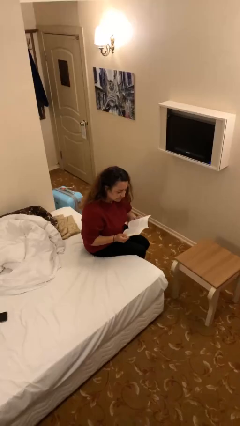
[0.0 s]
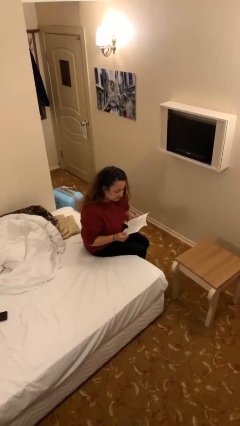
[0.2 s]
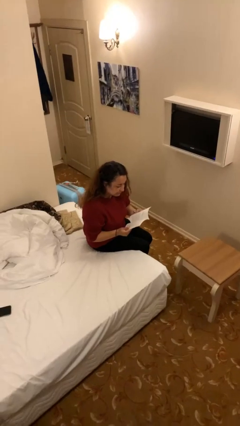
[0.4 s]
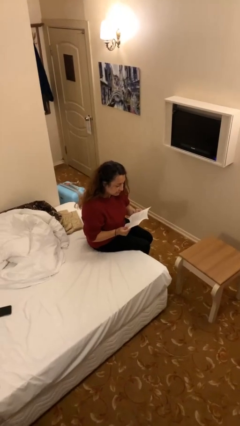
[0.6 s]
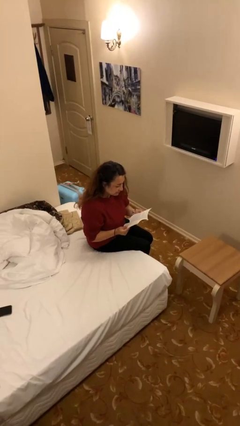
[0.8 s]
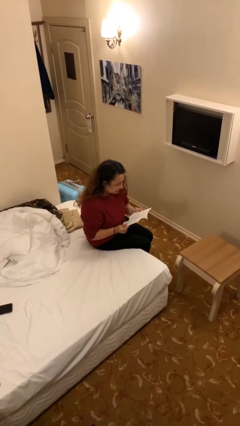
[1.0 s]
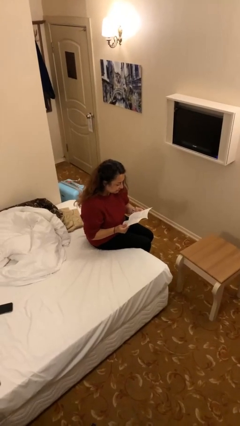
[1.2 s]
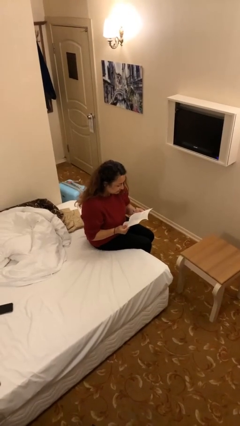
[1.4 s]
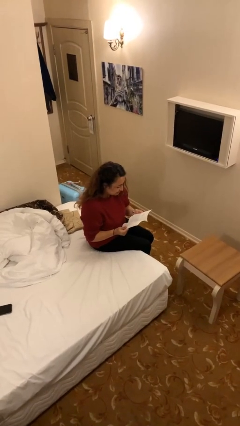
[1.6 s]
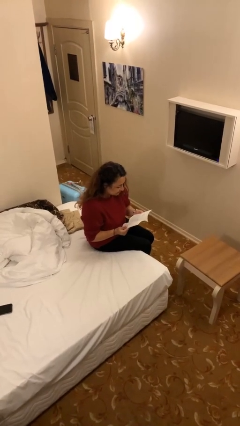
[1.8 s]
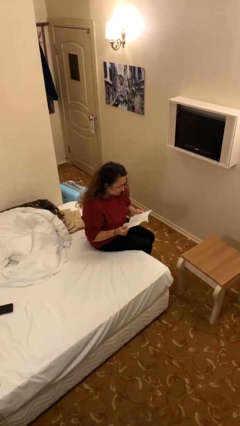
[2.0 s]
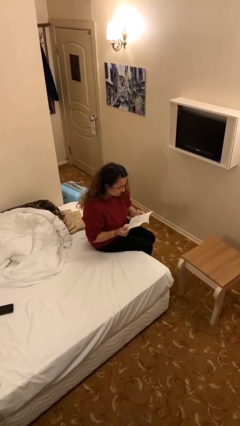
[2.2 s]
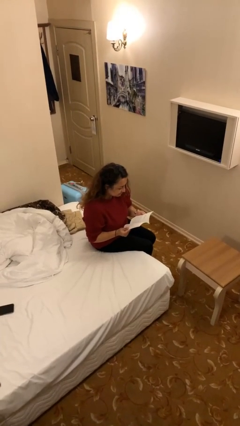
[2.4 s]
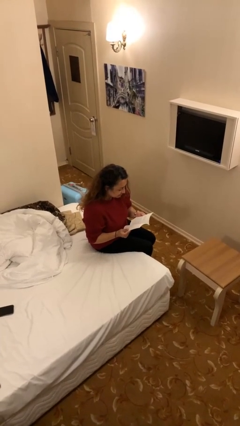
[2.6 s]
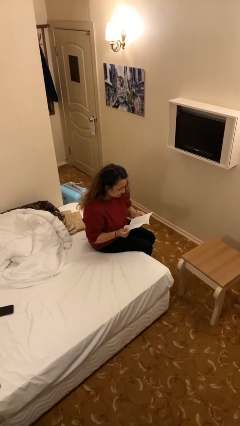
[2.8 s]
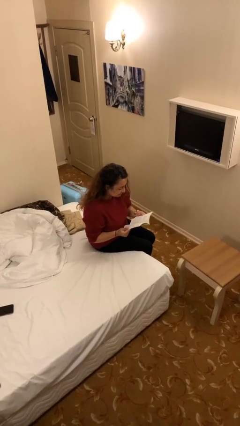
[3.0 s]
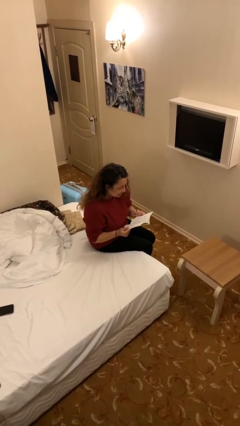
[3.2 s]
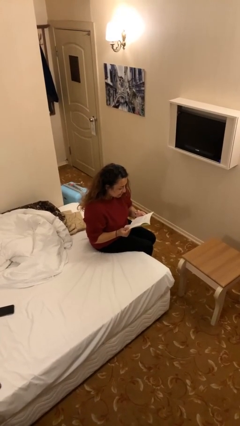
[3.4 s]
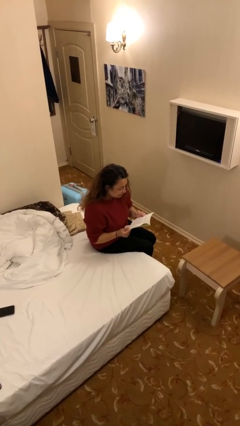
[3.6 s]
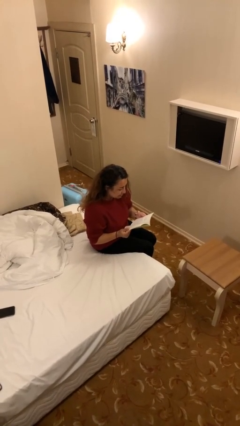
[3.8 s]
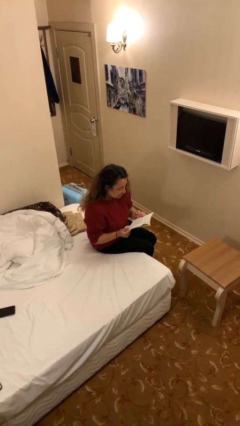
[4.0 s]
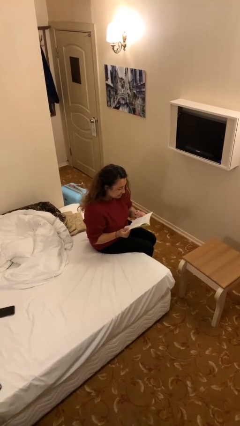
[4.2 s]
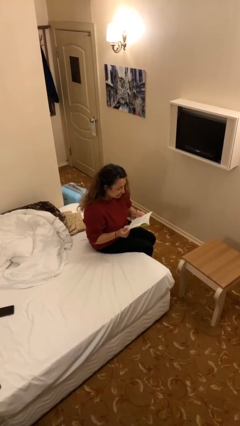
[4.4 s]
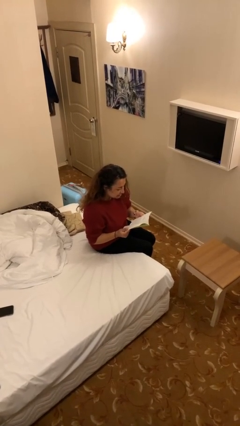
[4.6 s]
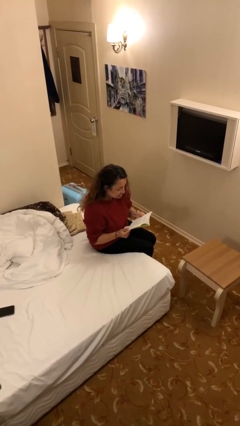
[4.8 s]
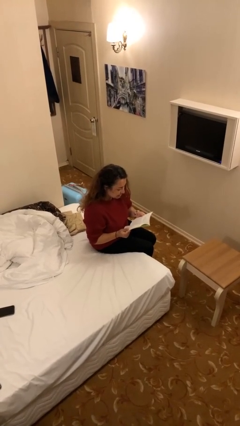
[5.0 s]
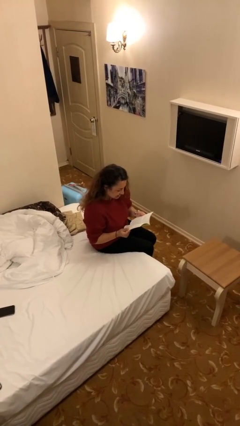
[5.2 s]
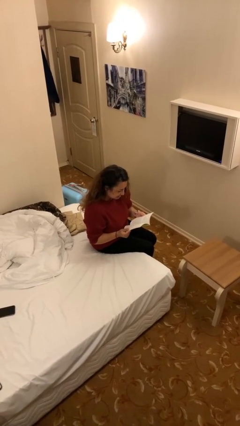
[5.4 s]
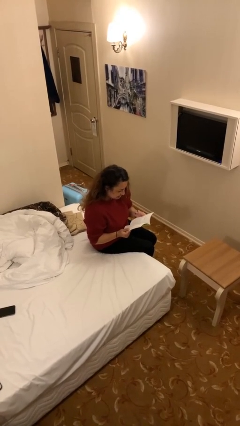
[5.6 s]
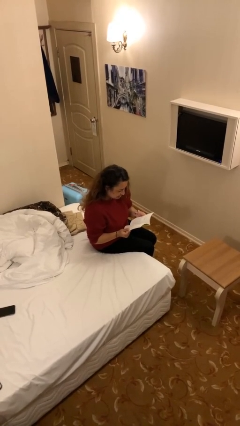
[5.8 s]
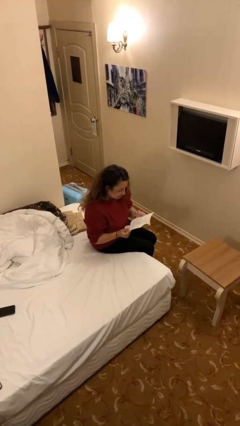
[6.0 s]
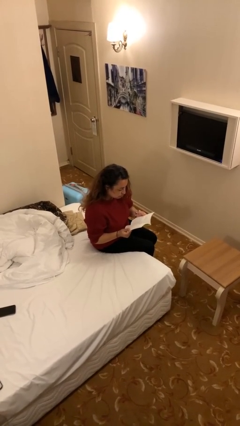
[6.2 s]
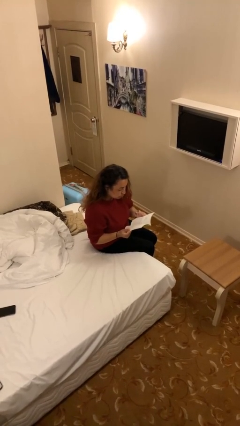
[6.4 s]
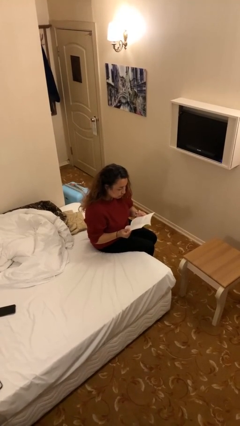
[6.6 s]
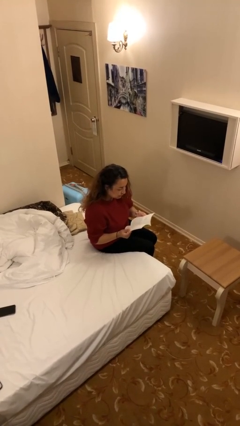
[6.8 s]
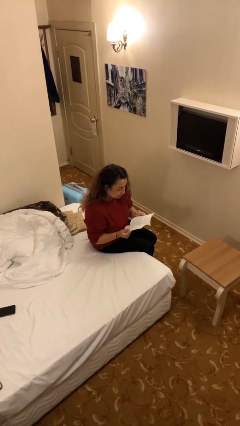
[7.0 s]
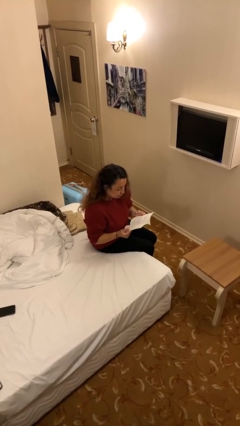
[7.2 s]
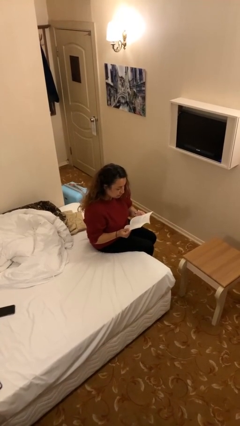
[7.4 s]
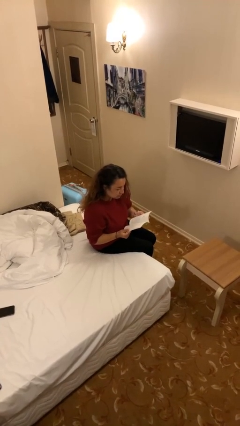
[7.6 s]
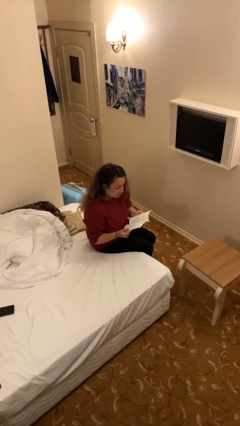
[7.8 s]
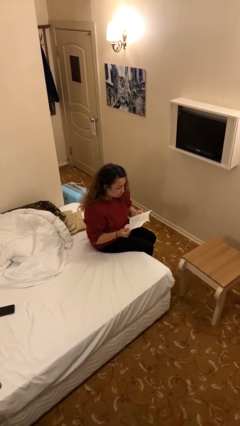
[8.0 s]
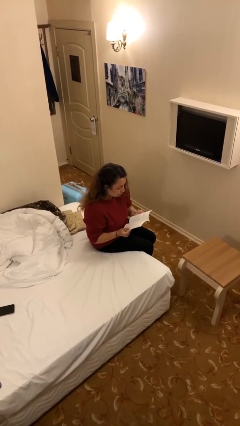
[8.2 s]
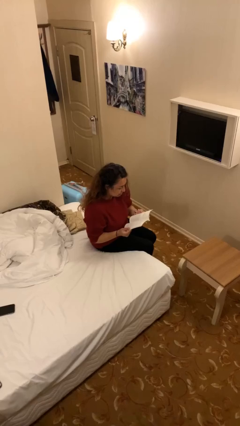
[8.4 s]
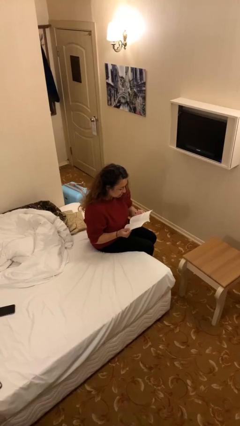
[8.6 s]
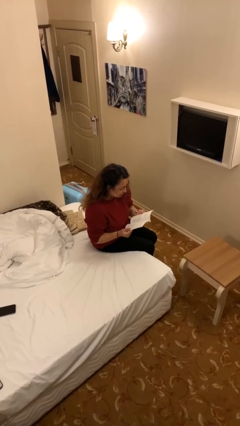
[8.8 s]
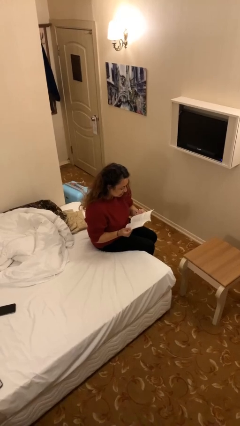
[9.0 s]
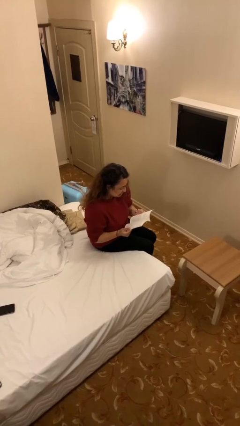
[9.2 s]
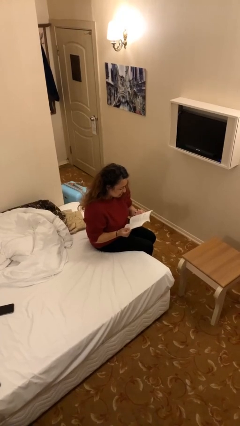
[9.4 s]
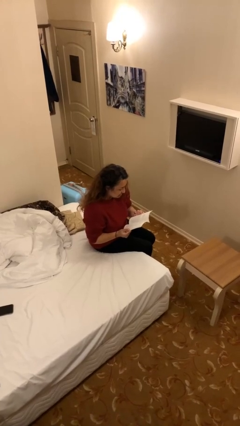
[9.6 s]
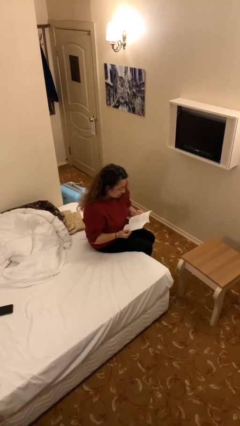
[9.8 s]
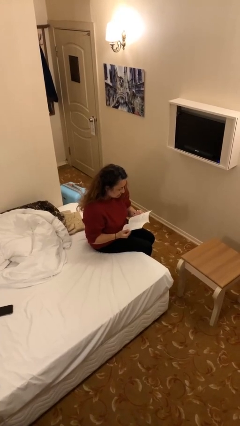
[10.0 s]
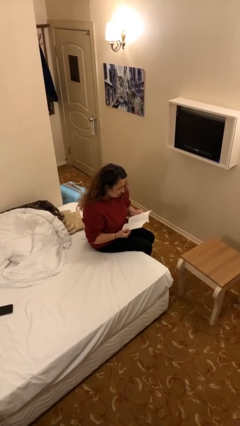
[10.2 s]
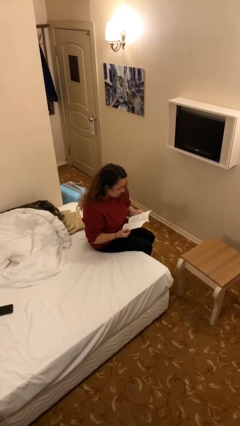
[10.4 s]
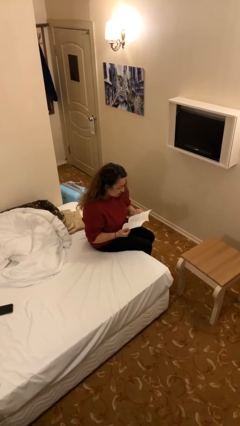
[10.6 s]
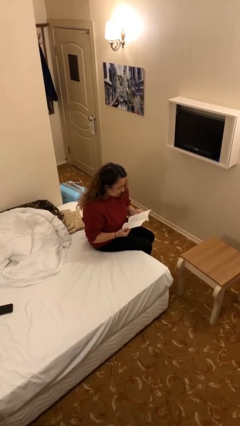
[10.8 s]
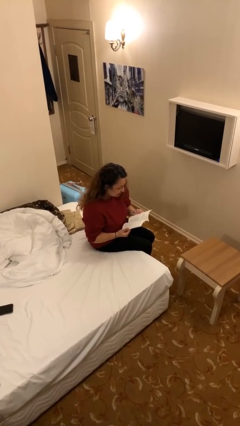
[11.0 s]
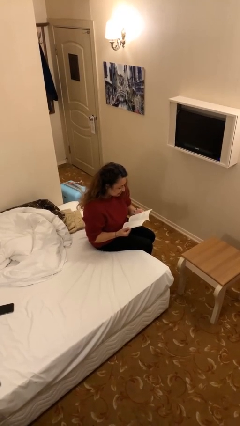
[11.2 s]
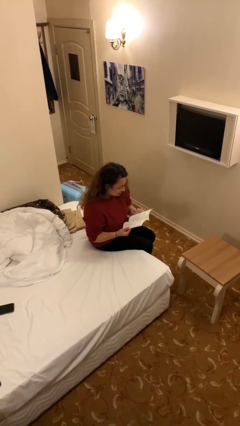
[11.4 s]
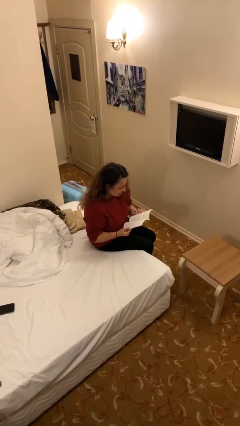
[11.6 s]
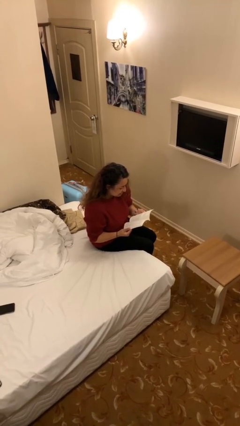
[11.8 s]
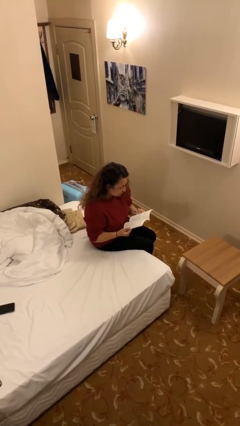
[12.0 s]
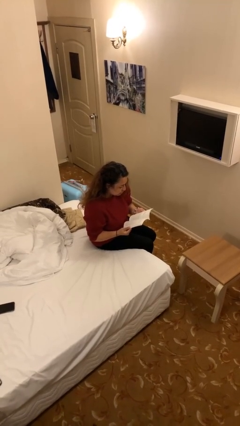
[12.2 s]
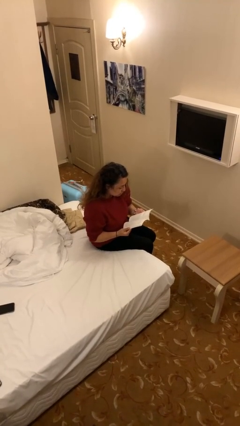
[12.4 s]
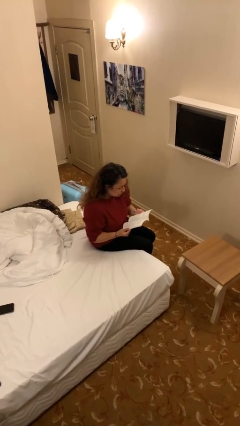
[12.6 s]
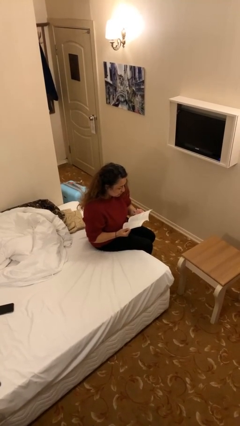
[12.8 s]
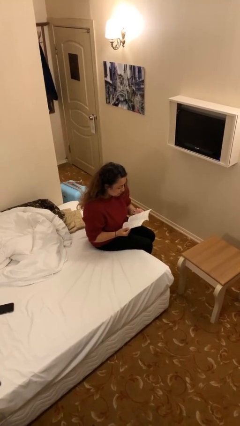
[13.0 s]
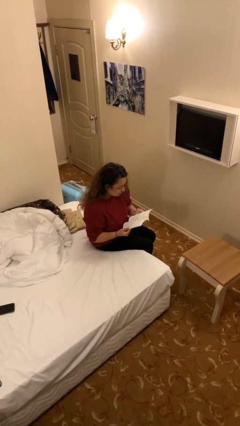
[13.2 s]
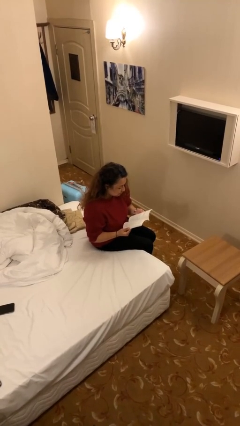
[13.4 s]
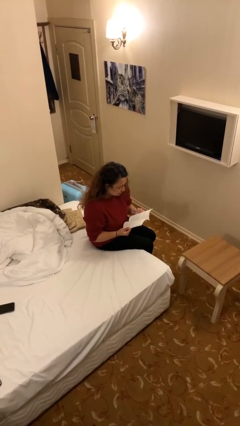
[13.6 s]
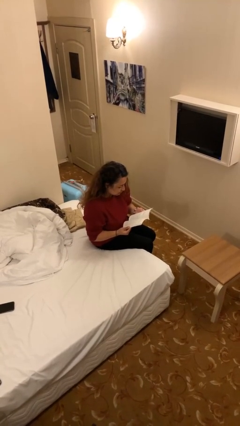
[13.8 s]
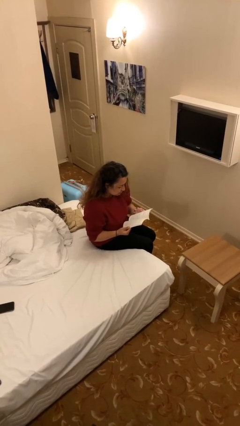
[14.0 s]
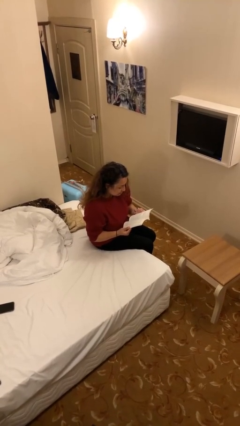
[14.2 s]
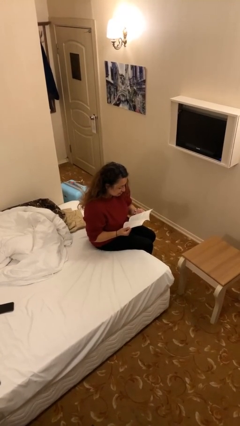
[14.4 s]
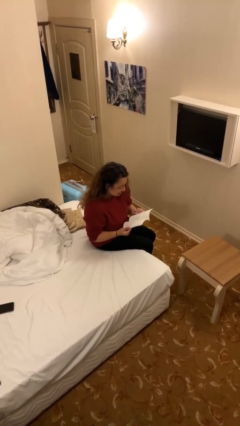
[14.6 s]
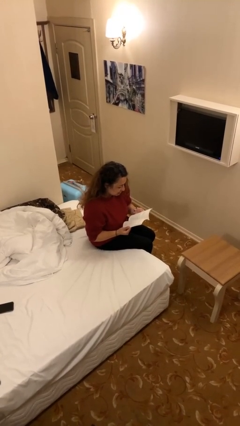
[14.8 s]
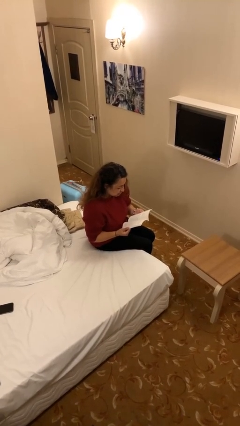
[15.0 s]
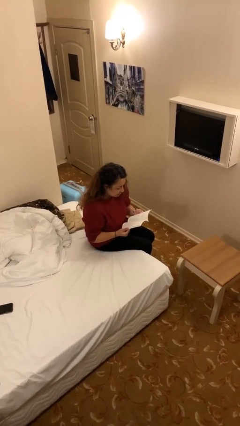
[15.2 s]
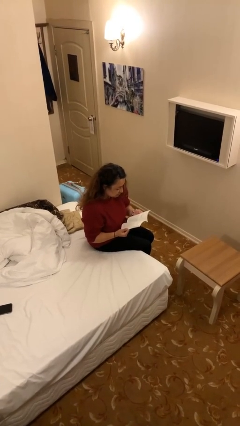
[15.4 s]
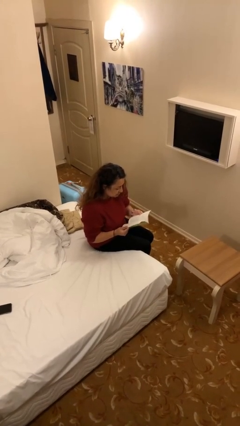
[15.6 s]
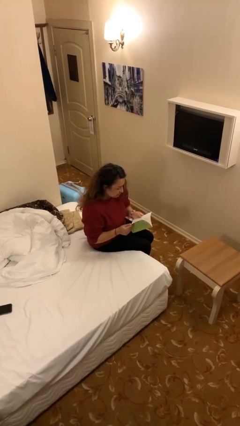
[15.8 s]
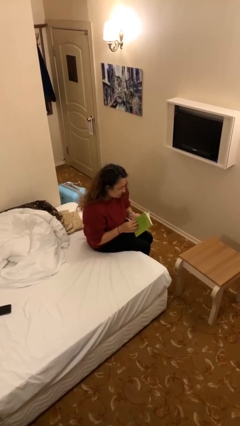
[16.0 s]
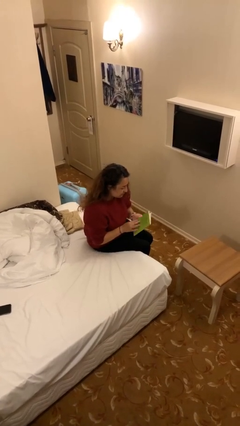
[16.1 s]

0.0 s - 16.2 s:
person reads document

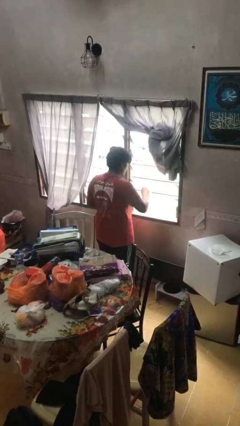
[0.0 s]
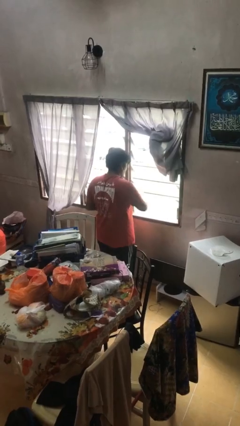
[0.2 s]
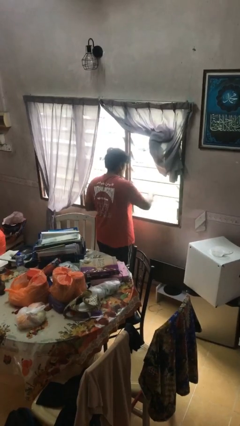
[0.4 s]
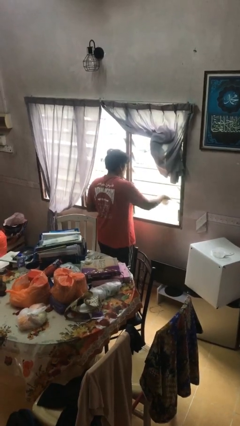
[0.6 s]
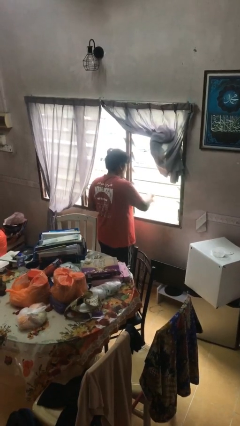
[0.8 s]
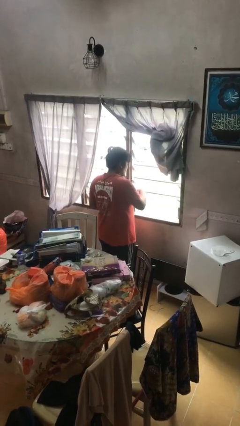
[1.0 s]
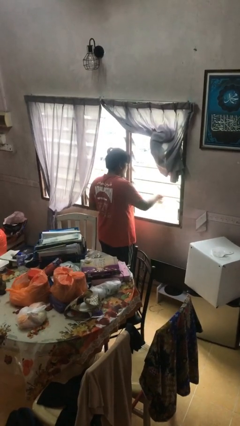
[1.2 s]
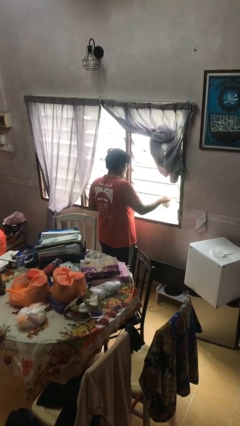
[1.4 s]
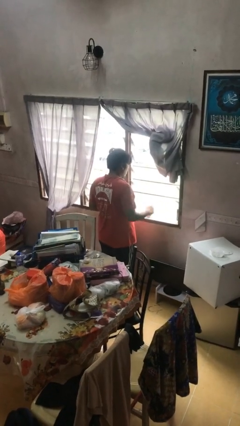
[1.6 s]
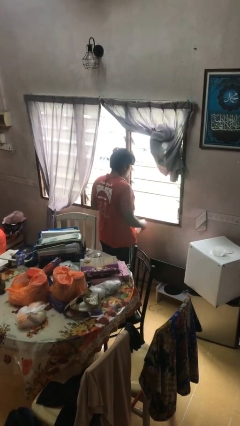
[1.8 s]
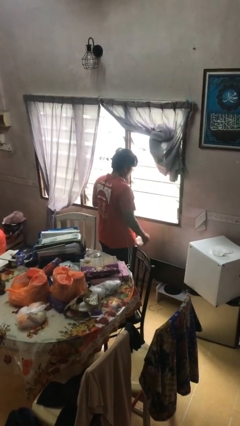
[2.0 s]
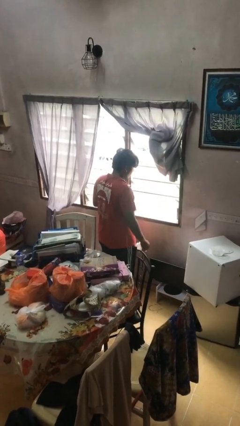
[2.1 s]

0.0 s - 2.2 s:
person washes window
